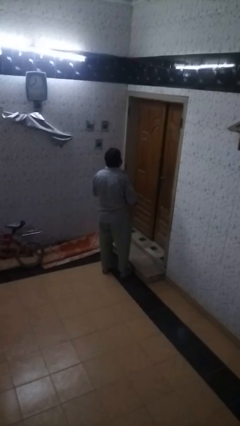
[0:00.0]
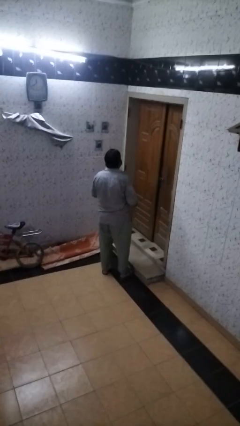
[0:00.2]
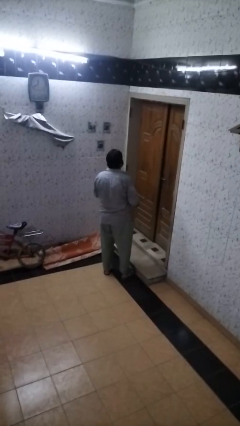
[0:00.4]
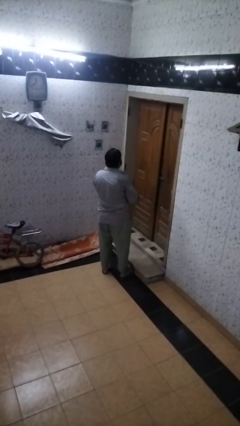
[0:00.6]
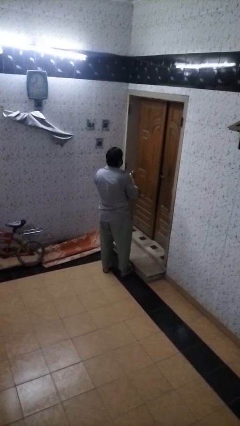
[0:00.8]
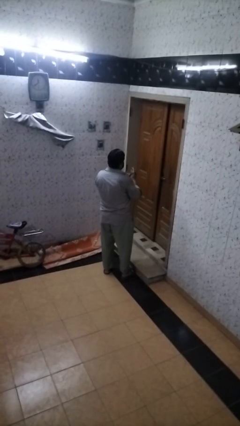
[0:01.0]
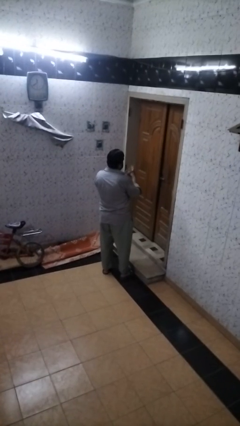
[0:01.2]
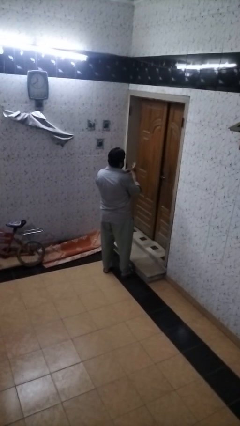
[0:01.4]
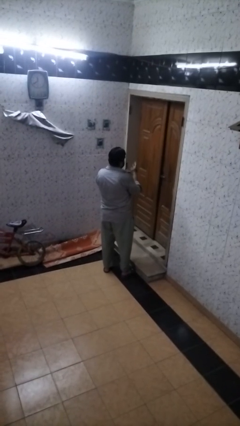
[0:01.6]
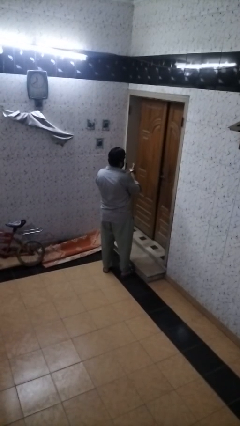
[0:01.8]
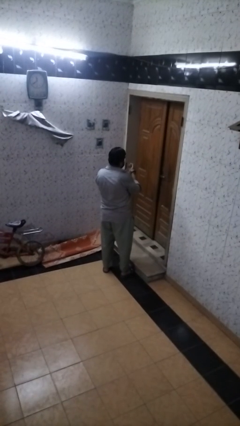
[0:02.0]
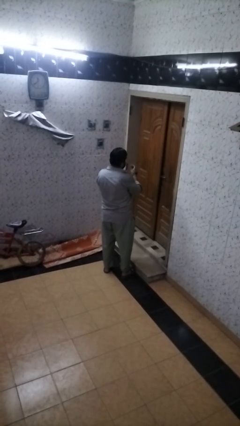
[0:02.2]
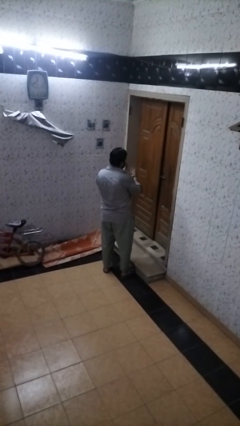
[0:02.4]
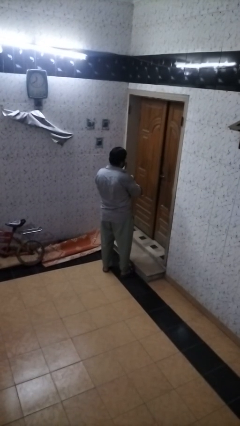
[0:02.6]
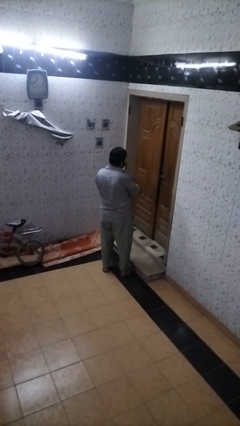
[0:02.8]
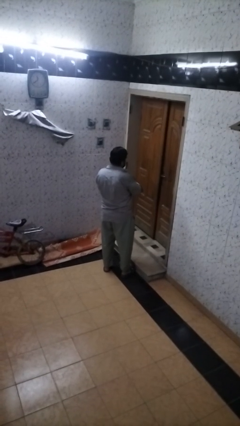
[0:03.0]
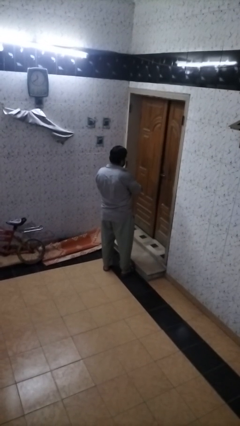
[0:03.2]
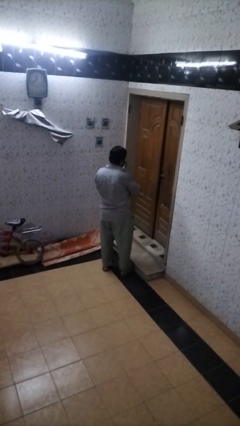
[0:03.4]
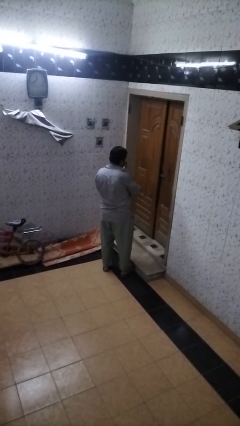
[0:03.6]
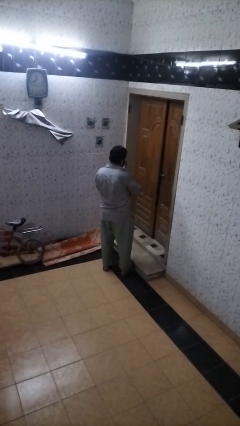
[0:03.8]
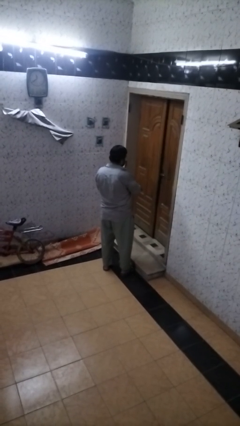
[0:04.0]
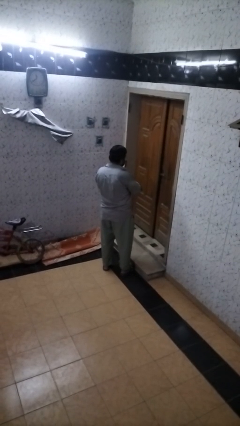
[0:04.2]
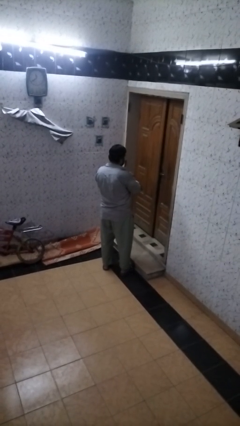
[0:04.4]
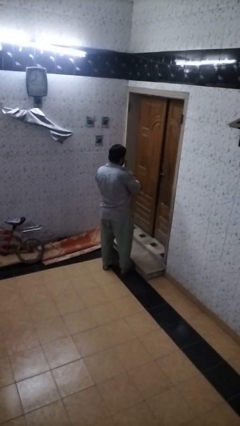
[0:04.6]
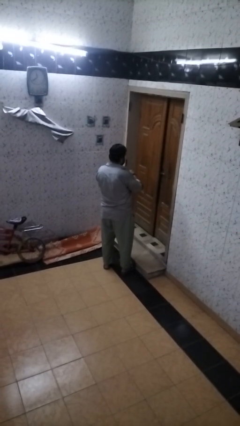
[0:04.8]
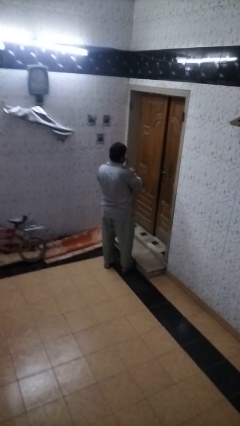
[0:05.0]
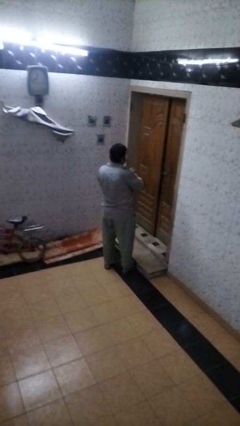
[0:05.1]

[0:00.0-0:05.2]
person puts on wristwatch

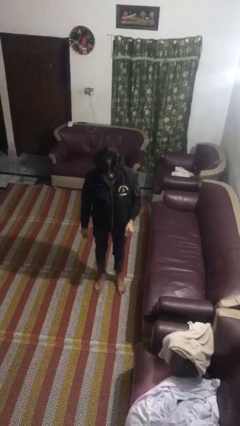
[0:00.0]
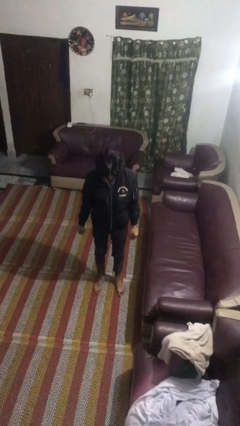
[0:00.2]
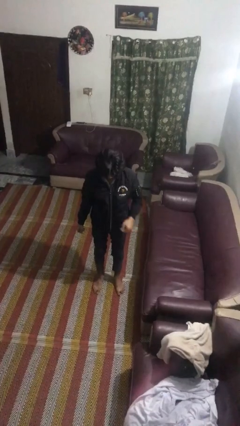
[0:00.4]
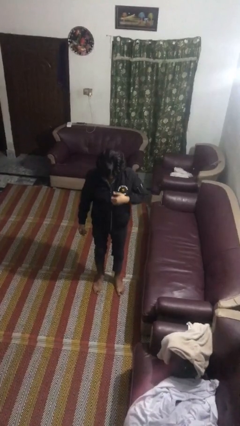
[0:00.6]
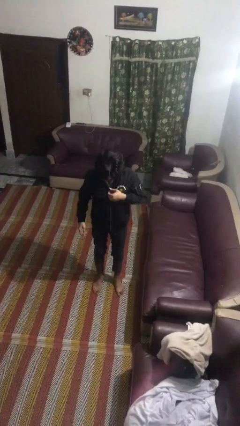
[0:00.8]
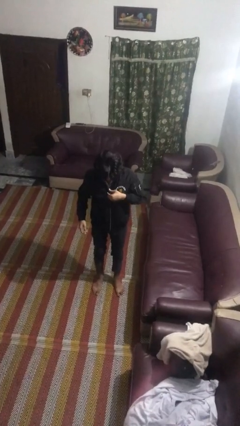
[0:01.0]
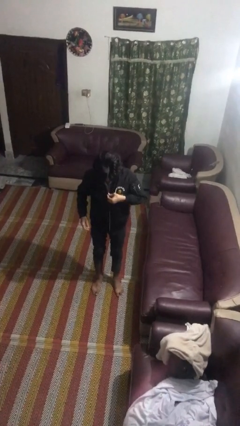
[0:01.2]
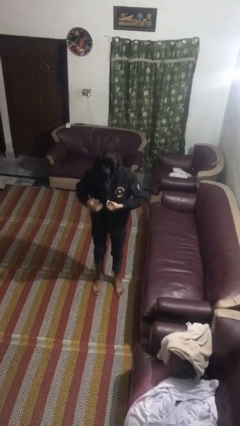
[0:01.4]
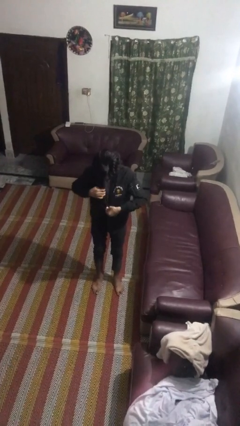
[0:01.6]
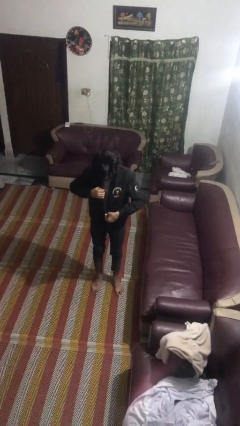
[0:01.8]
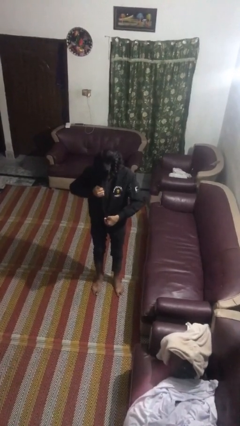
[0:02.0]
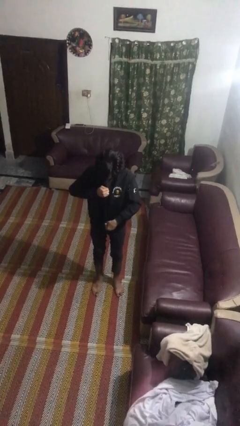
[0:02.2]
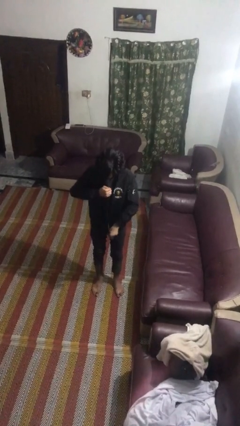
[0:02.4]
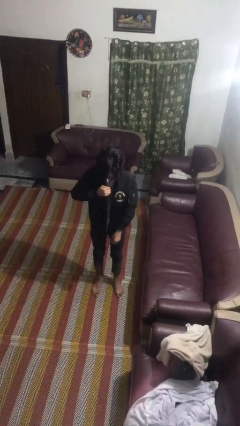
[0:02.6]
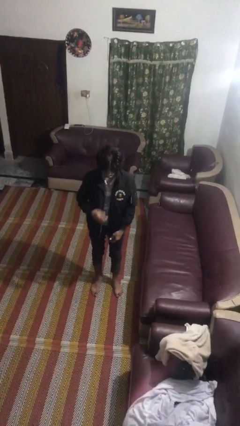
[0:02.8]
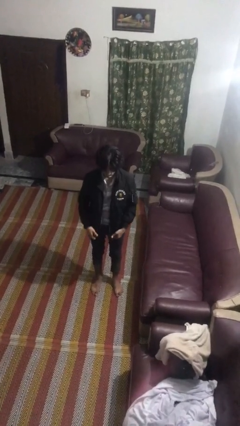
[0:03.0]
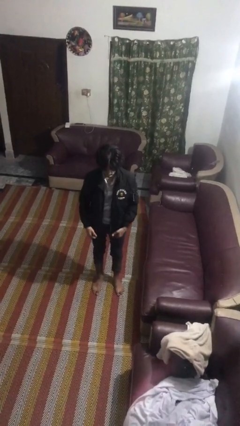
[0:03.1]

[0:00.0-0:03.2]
person unzips jacket

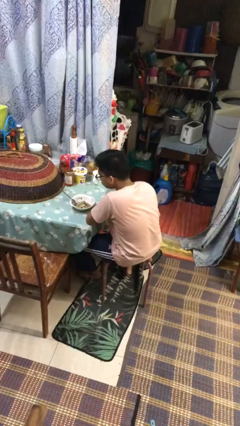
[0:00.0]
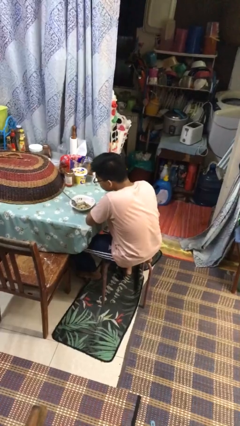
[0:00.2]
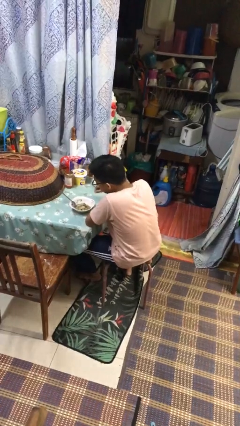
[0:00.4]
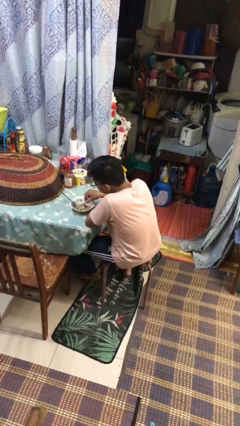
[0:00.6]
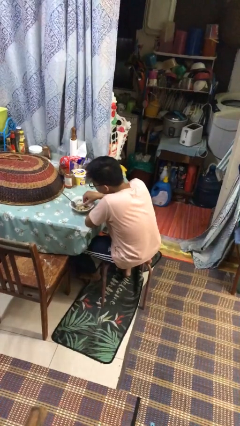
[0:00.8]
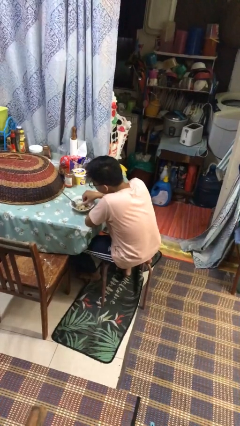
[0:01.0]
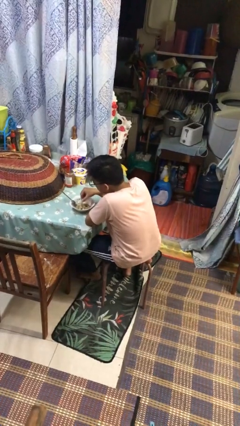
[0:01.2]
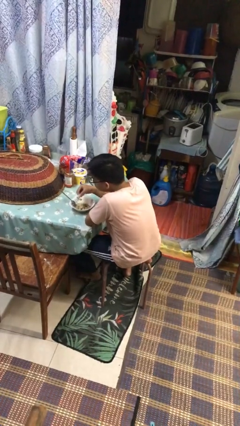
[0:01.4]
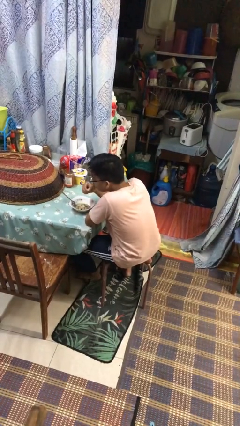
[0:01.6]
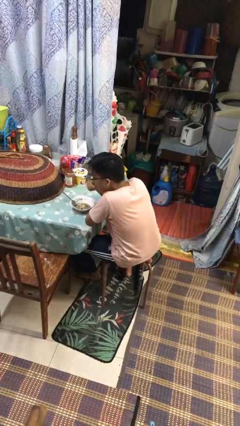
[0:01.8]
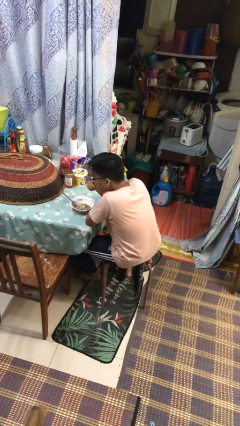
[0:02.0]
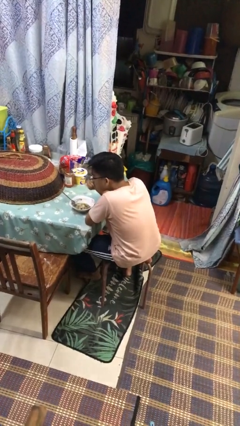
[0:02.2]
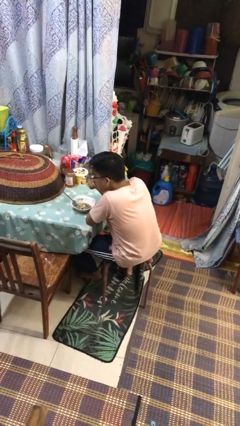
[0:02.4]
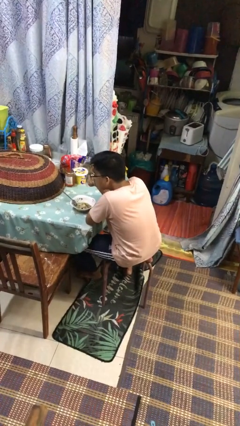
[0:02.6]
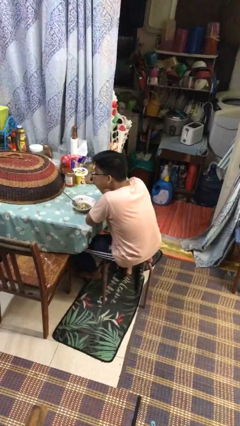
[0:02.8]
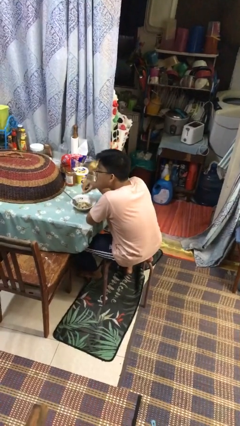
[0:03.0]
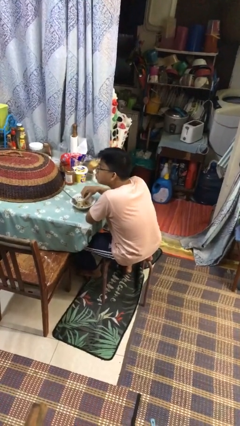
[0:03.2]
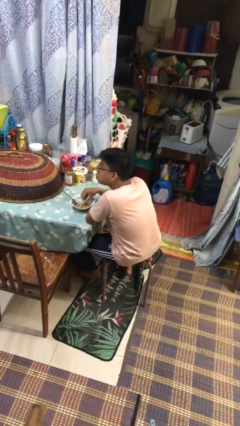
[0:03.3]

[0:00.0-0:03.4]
person eats with hands

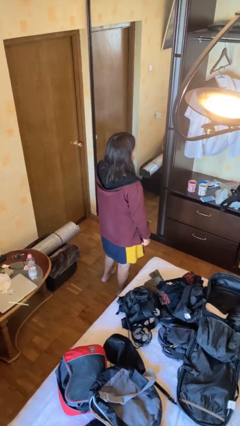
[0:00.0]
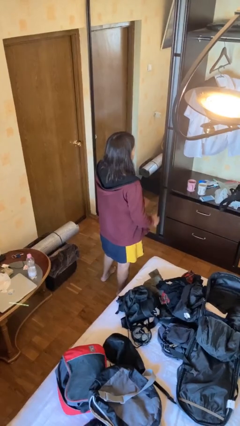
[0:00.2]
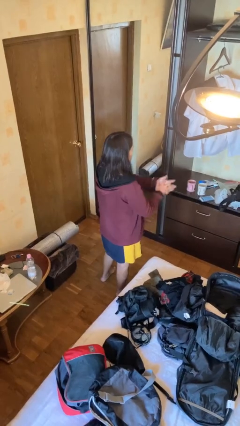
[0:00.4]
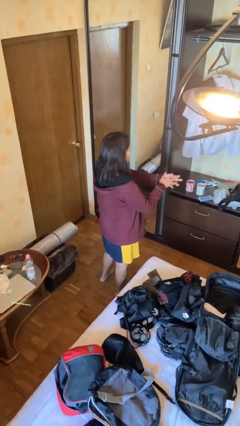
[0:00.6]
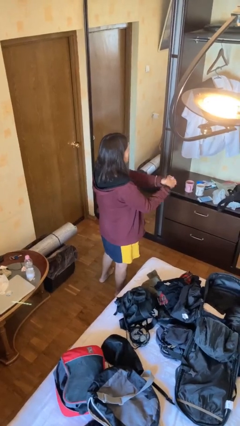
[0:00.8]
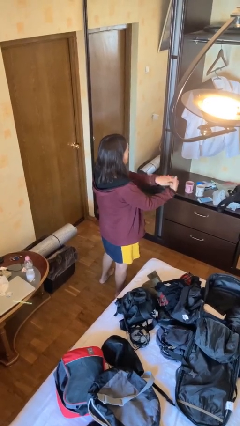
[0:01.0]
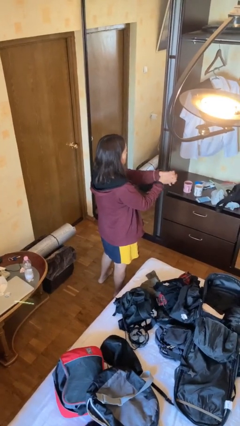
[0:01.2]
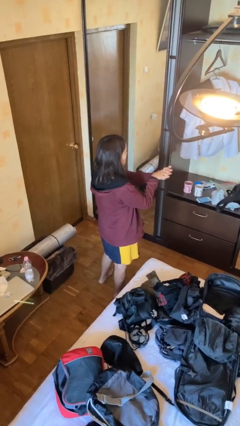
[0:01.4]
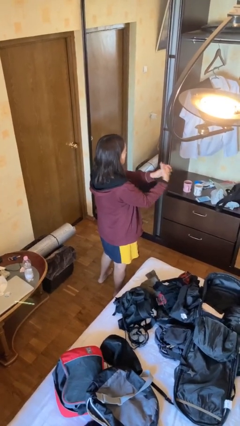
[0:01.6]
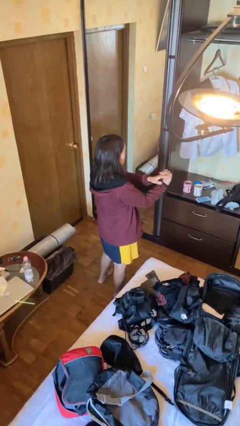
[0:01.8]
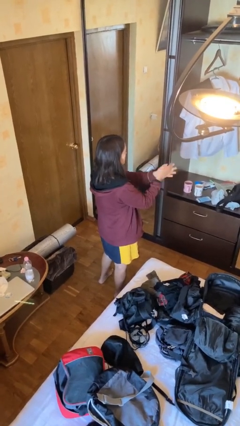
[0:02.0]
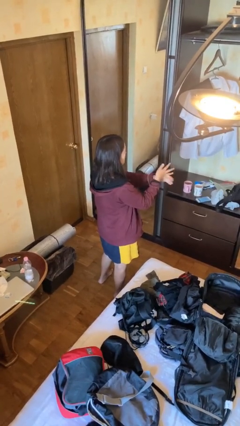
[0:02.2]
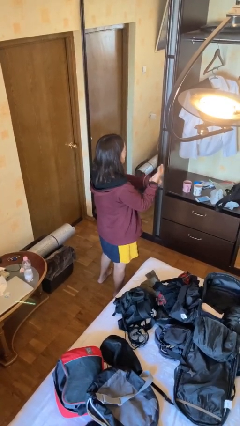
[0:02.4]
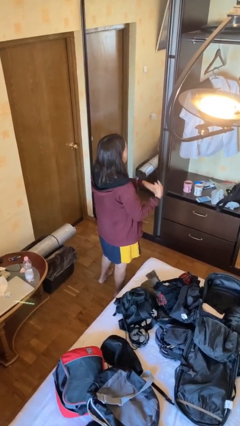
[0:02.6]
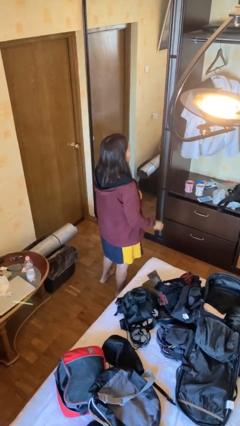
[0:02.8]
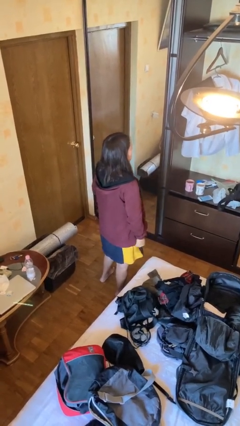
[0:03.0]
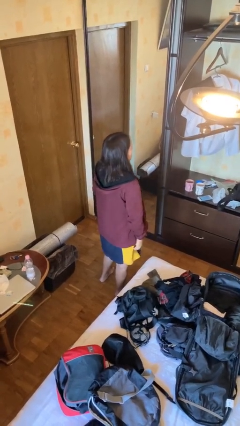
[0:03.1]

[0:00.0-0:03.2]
person cracks knuckles

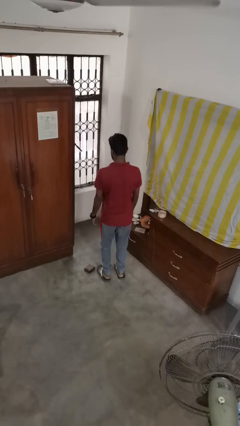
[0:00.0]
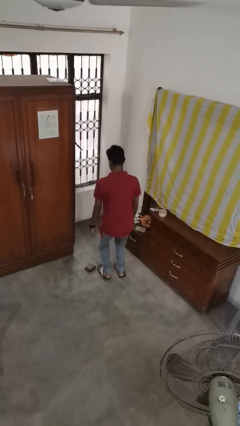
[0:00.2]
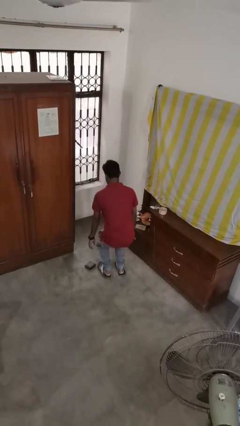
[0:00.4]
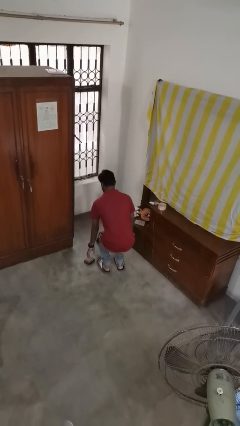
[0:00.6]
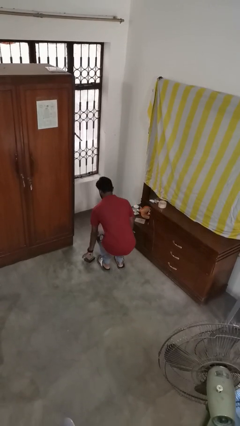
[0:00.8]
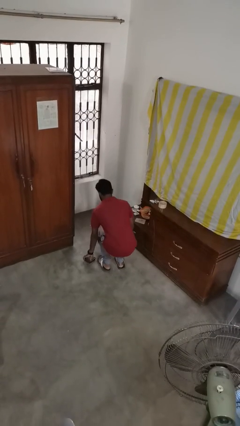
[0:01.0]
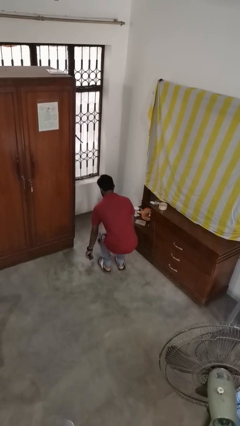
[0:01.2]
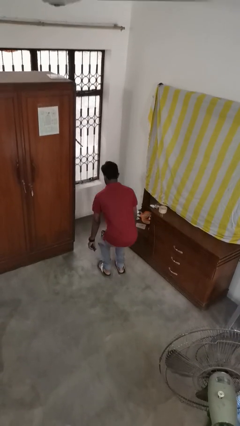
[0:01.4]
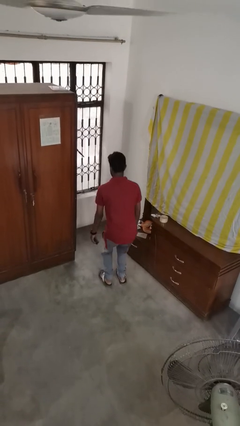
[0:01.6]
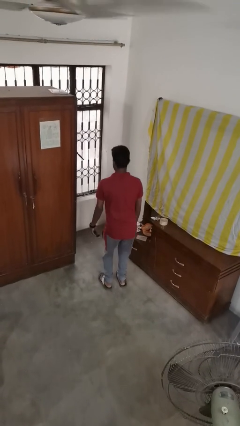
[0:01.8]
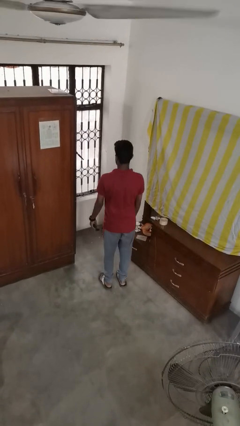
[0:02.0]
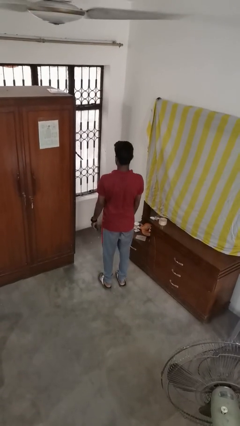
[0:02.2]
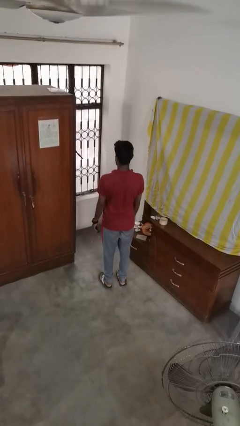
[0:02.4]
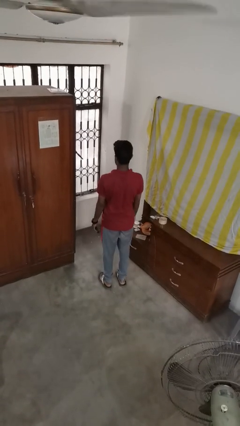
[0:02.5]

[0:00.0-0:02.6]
person picks up object from floor
